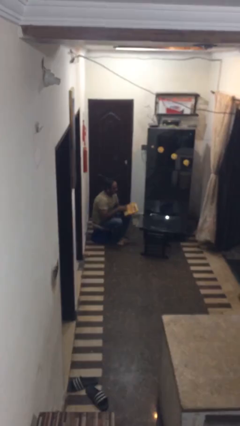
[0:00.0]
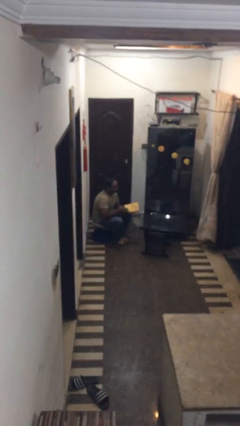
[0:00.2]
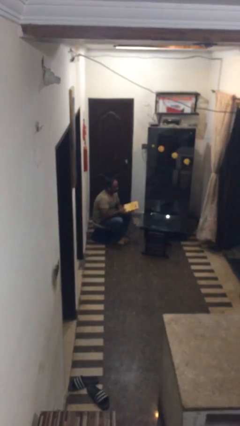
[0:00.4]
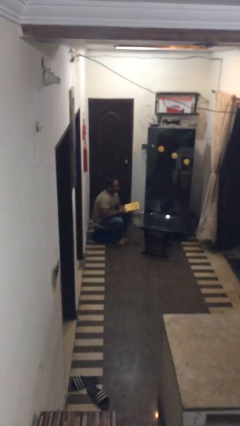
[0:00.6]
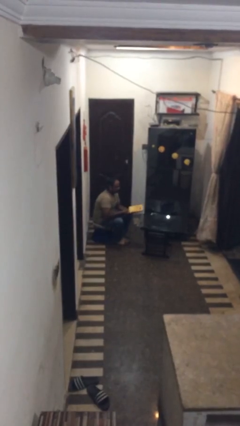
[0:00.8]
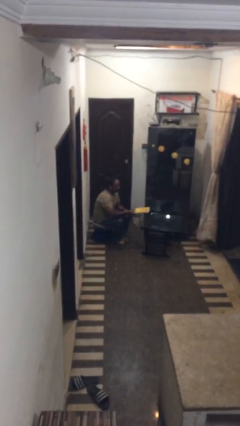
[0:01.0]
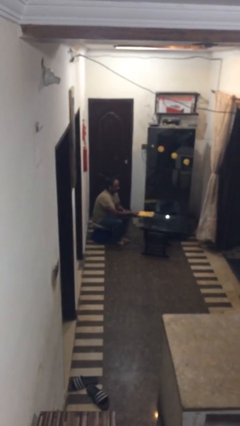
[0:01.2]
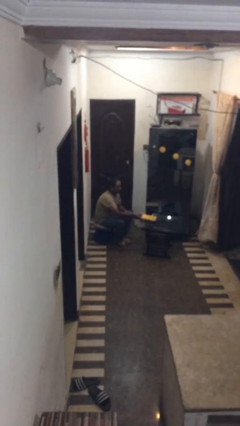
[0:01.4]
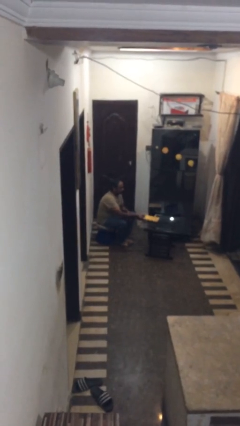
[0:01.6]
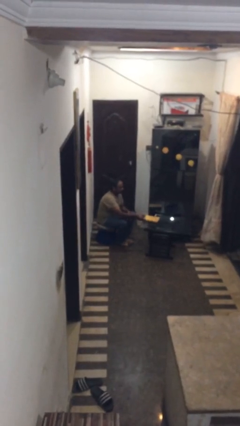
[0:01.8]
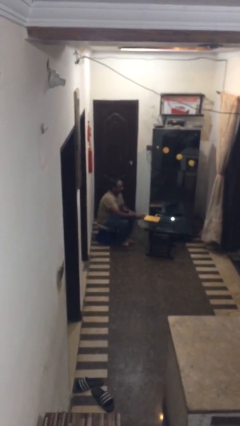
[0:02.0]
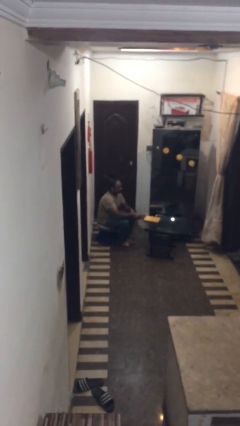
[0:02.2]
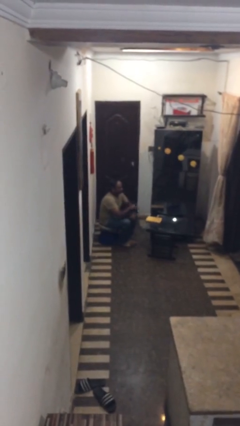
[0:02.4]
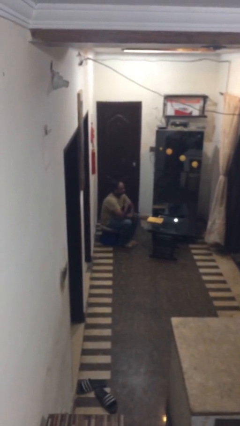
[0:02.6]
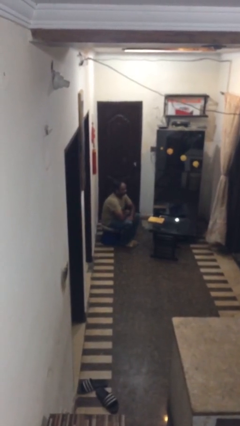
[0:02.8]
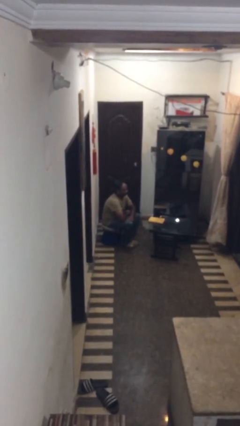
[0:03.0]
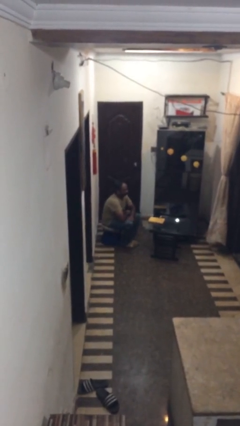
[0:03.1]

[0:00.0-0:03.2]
person puts down object on table

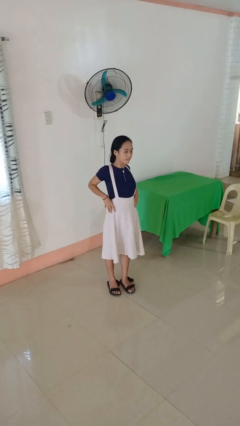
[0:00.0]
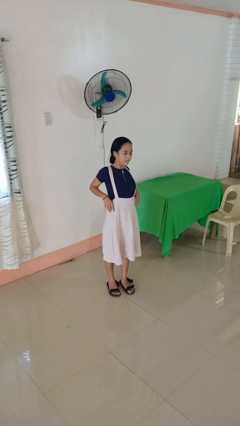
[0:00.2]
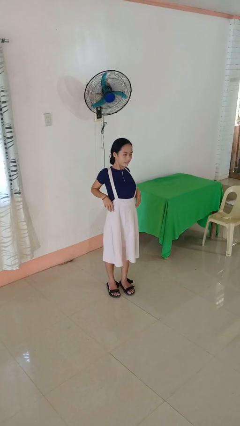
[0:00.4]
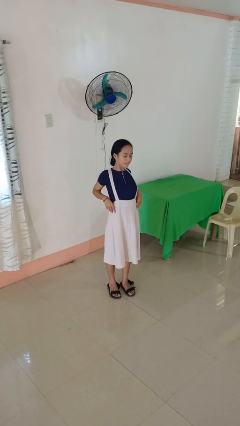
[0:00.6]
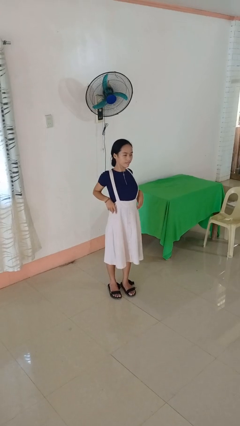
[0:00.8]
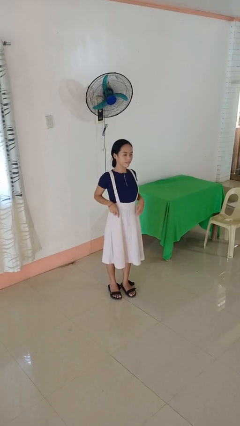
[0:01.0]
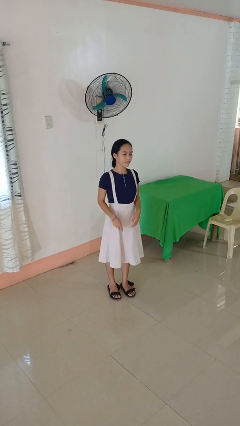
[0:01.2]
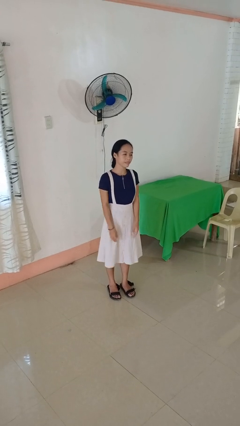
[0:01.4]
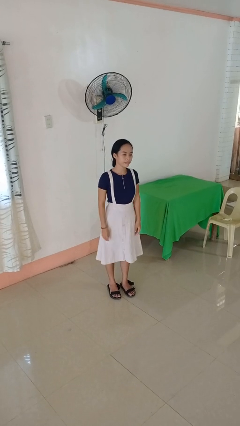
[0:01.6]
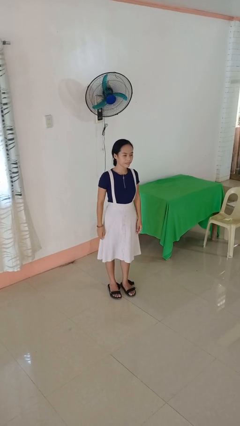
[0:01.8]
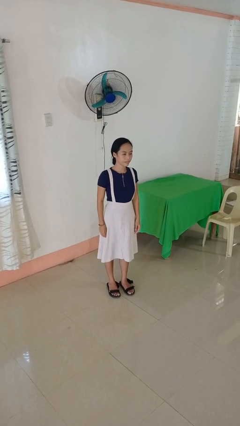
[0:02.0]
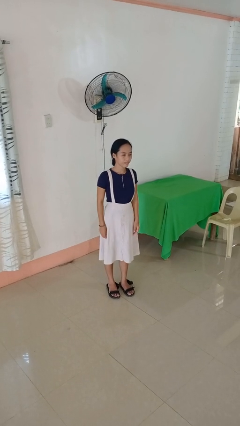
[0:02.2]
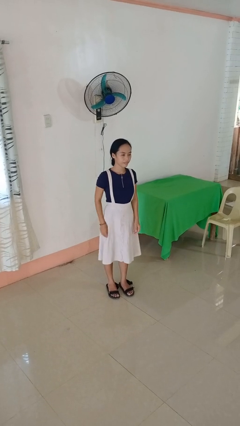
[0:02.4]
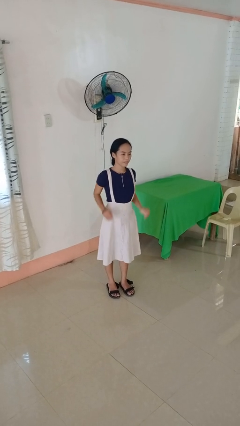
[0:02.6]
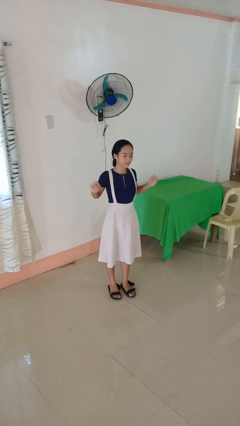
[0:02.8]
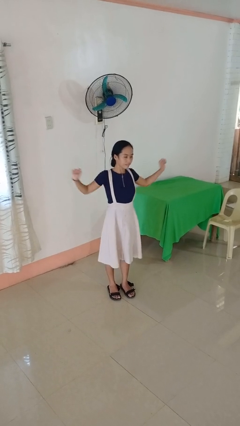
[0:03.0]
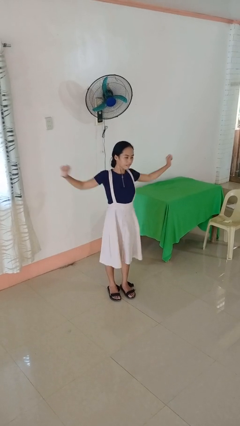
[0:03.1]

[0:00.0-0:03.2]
person stretches back

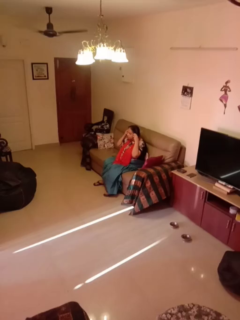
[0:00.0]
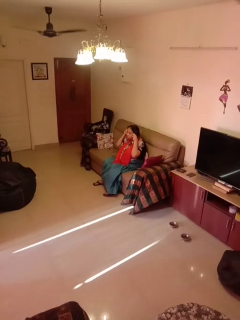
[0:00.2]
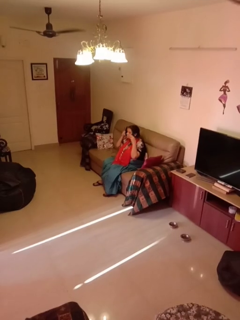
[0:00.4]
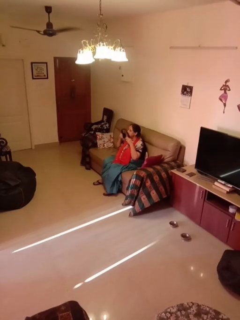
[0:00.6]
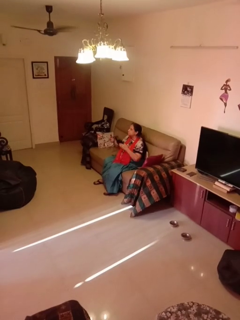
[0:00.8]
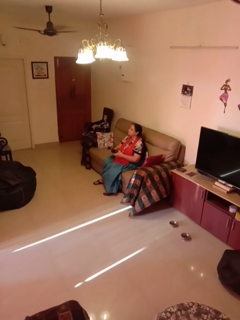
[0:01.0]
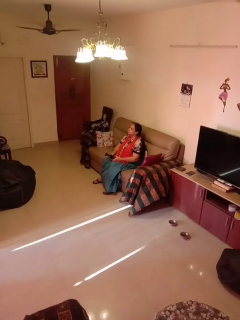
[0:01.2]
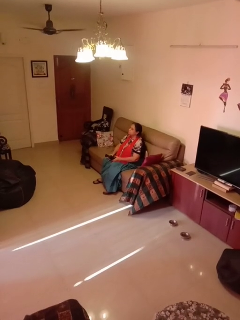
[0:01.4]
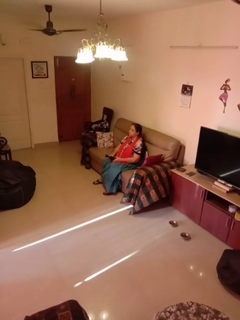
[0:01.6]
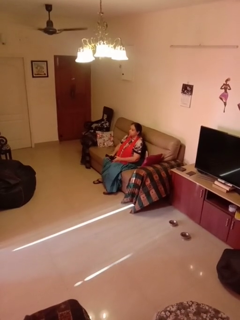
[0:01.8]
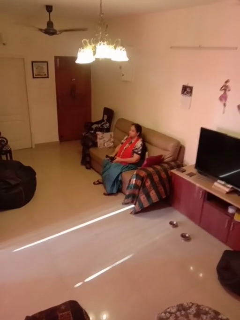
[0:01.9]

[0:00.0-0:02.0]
person takes off headphones

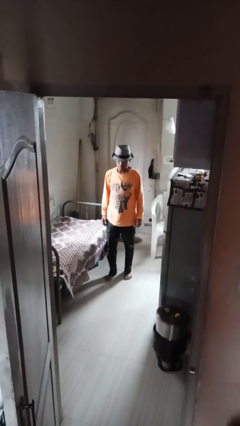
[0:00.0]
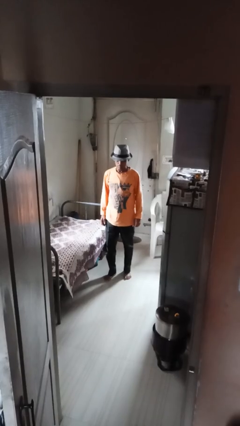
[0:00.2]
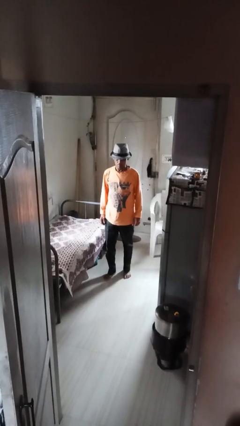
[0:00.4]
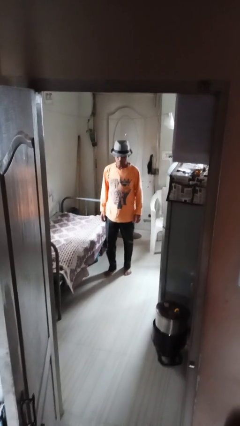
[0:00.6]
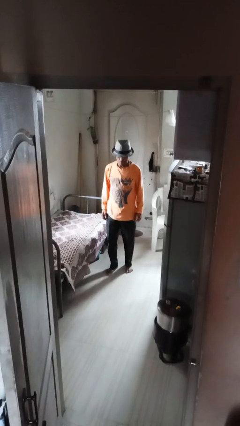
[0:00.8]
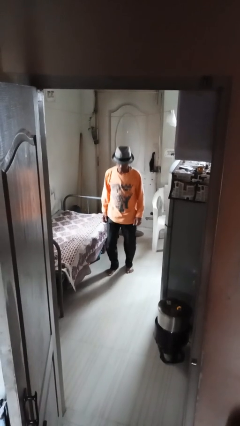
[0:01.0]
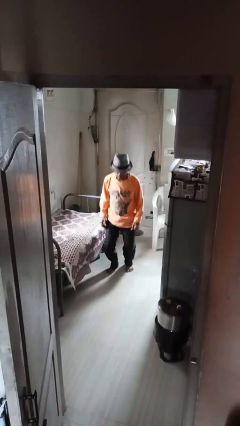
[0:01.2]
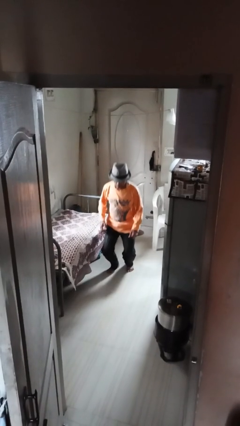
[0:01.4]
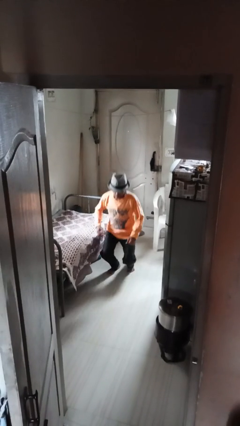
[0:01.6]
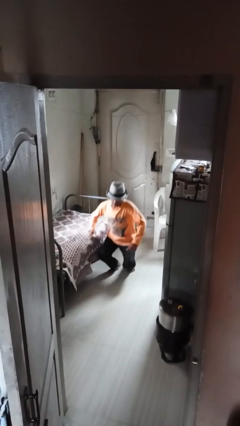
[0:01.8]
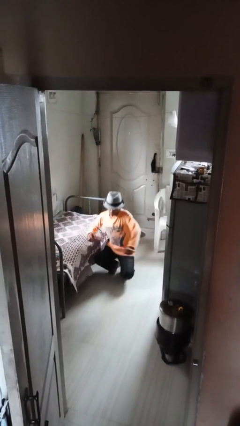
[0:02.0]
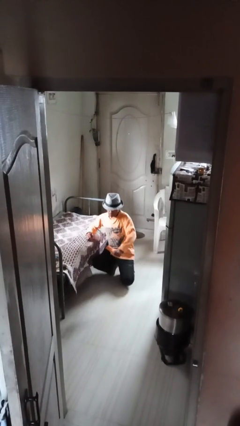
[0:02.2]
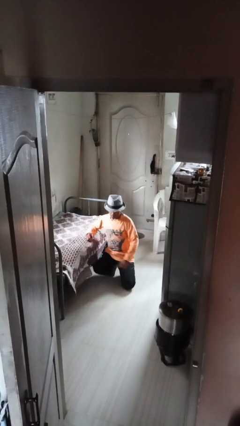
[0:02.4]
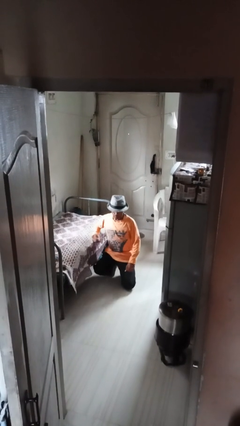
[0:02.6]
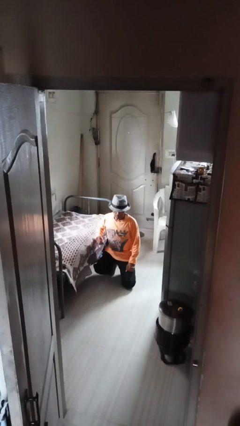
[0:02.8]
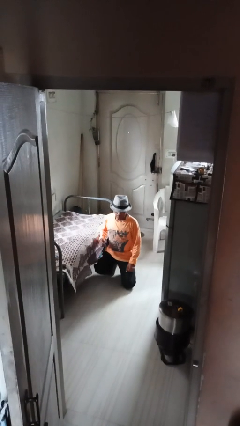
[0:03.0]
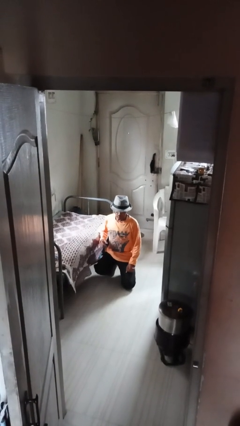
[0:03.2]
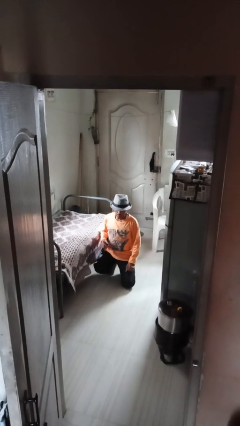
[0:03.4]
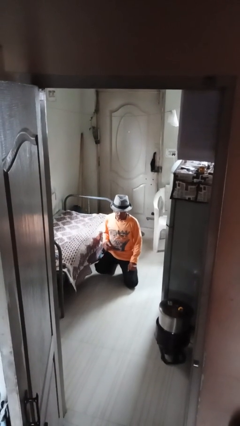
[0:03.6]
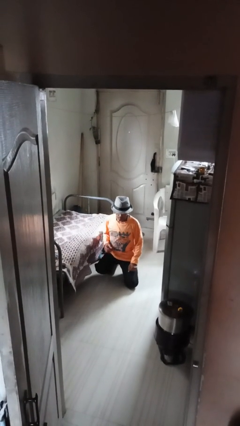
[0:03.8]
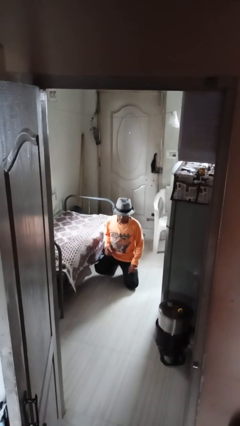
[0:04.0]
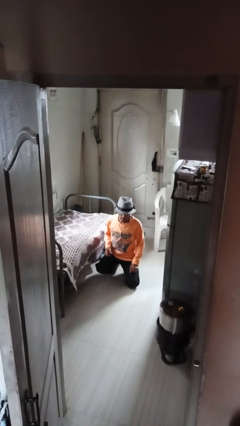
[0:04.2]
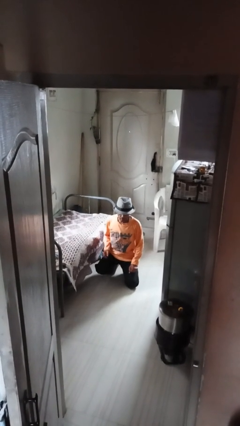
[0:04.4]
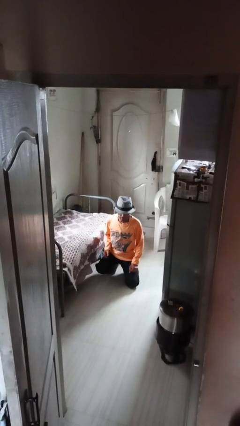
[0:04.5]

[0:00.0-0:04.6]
person kneels

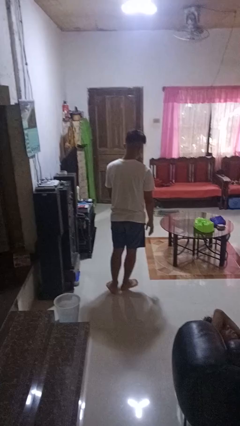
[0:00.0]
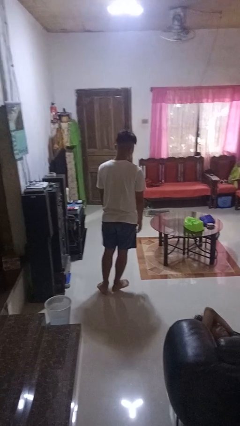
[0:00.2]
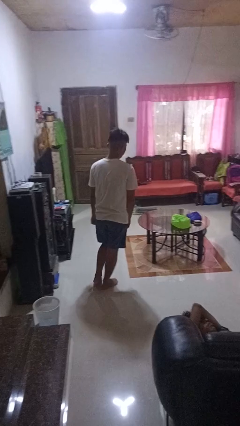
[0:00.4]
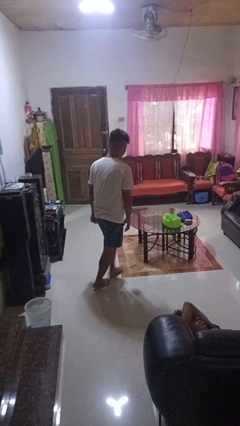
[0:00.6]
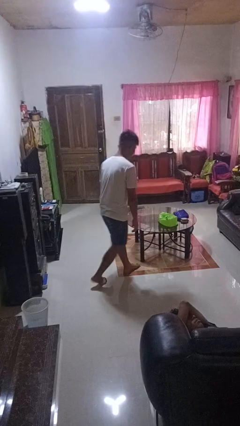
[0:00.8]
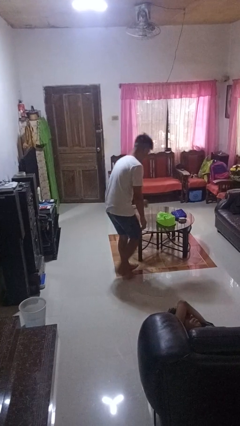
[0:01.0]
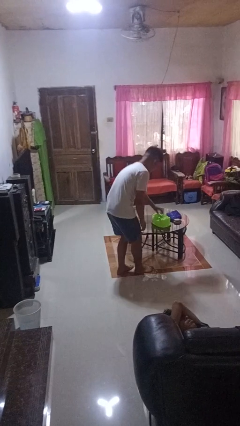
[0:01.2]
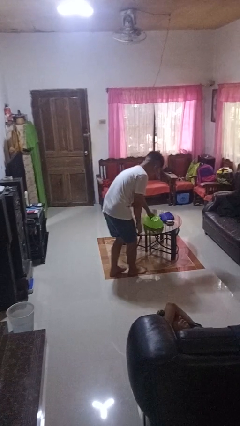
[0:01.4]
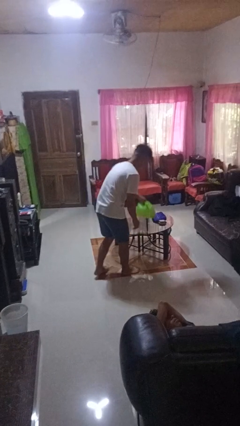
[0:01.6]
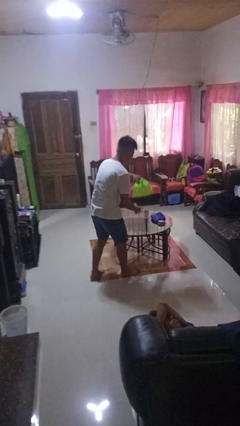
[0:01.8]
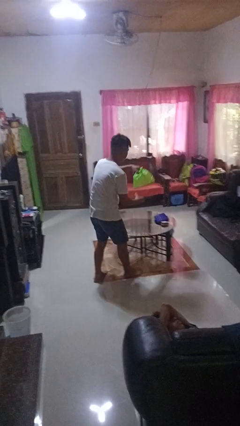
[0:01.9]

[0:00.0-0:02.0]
person picks up object from table

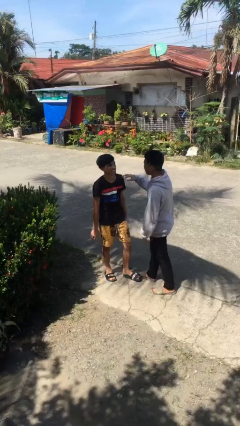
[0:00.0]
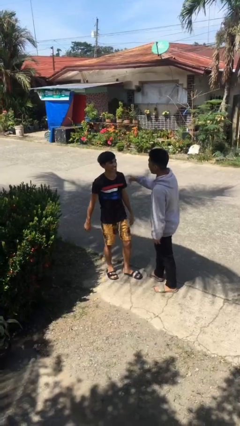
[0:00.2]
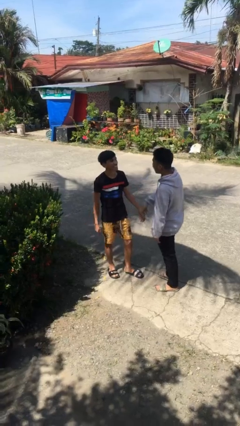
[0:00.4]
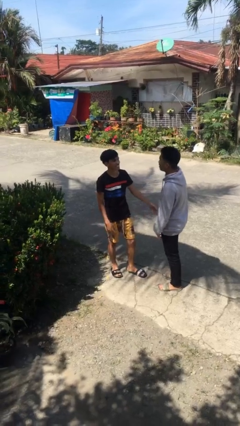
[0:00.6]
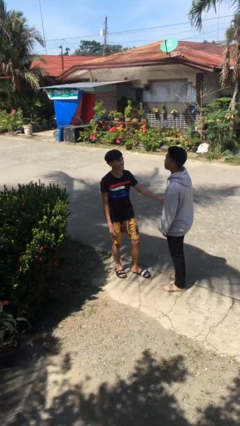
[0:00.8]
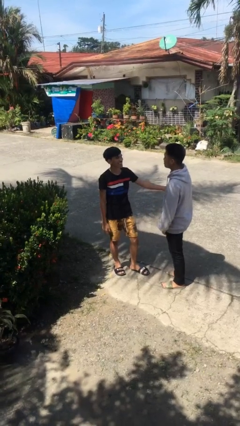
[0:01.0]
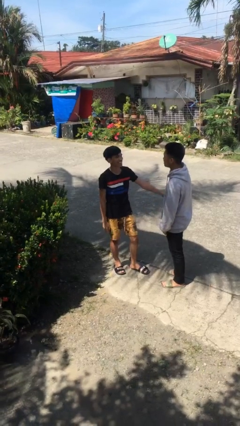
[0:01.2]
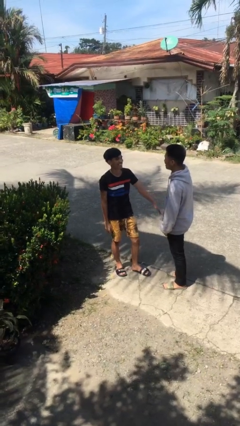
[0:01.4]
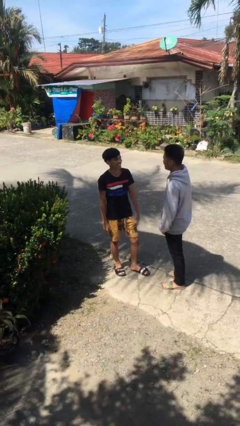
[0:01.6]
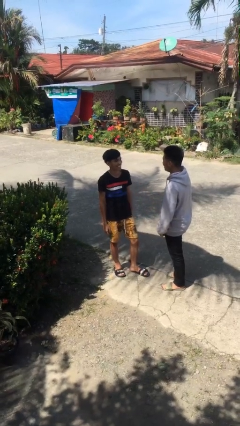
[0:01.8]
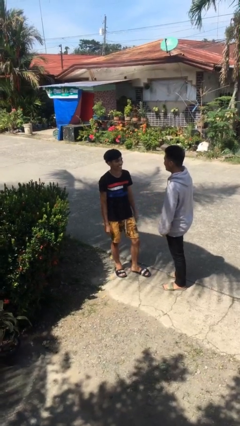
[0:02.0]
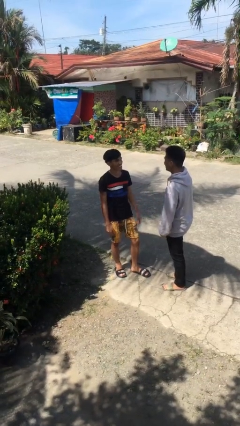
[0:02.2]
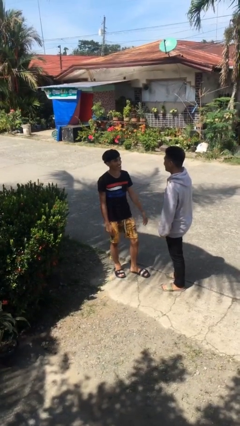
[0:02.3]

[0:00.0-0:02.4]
person talks to person

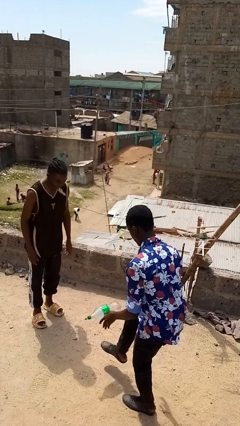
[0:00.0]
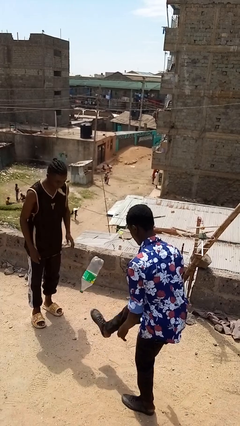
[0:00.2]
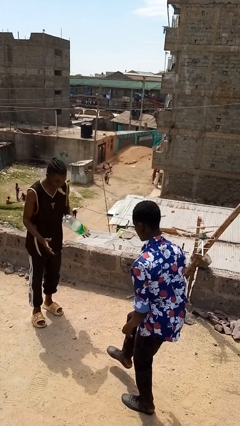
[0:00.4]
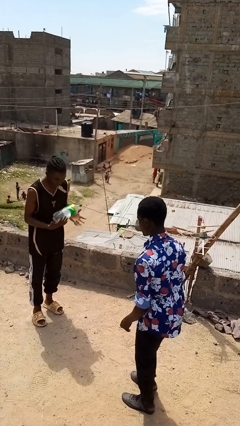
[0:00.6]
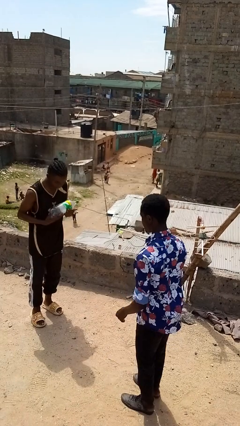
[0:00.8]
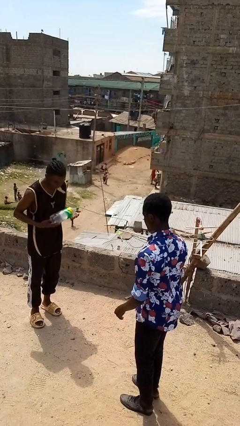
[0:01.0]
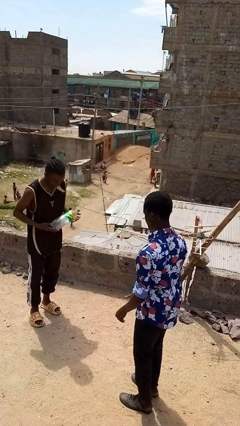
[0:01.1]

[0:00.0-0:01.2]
person kicks object to person
